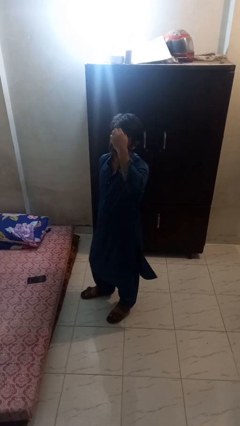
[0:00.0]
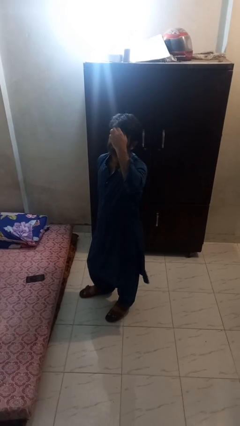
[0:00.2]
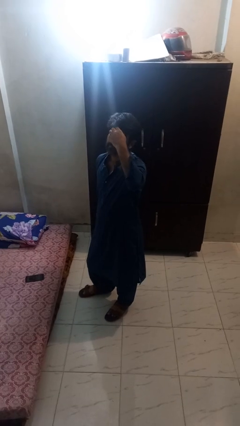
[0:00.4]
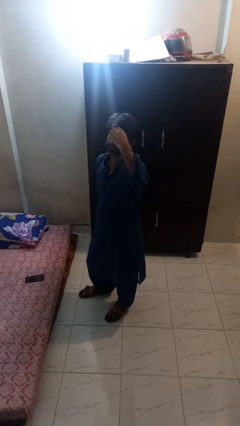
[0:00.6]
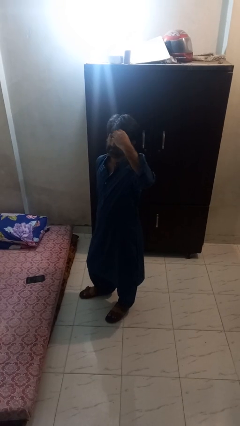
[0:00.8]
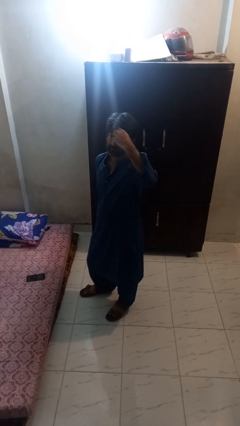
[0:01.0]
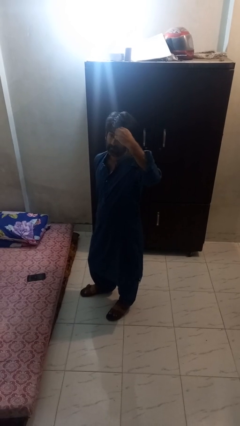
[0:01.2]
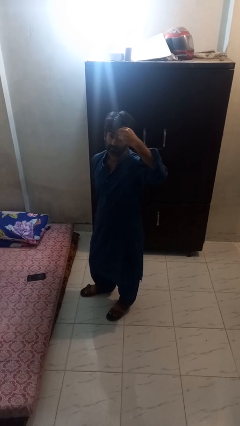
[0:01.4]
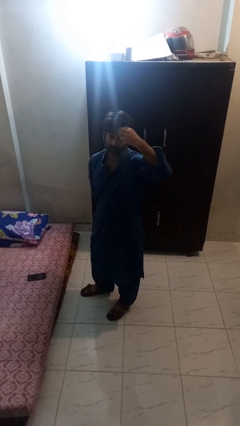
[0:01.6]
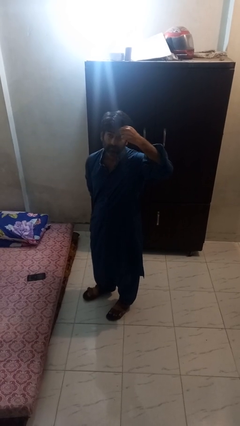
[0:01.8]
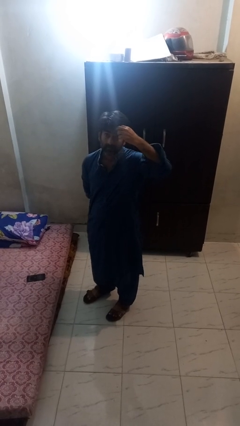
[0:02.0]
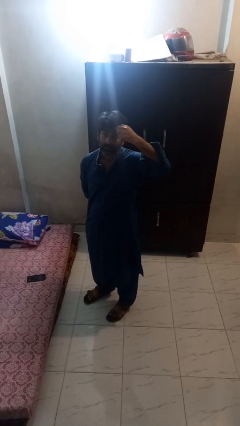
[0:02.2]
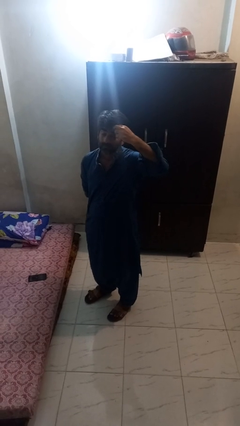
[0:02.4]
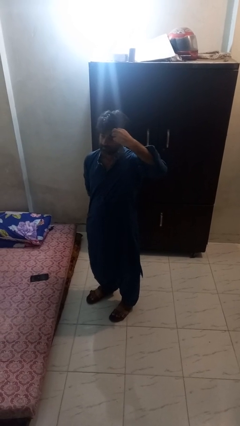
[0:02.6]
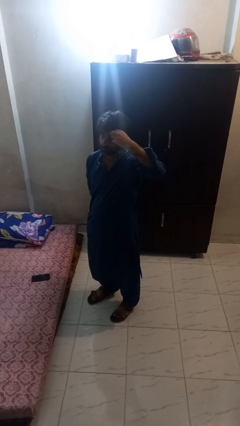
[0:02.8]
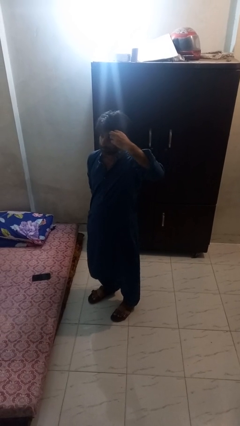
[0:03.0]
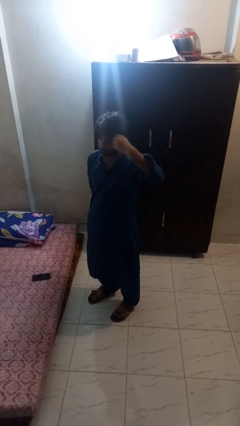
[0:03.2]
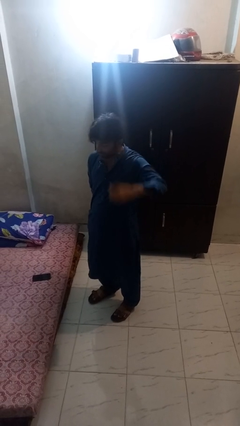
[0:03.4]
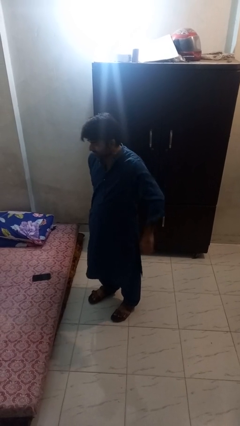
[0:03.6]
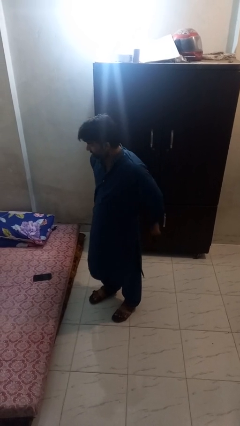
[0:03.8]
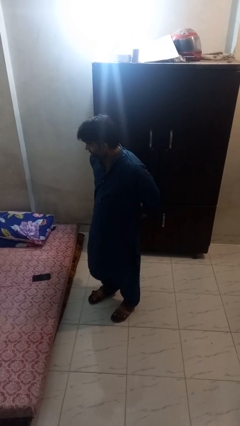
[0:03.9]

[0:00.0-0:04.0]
person scratches face

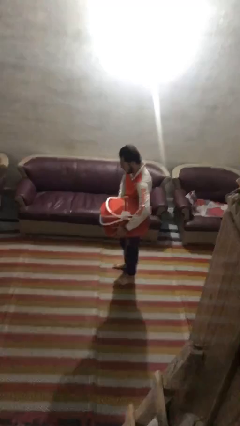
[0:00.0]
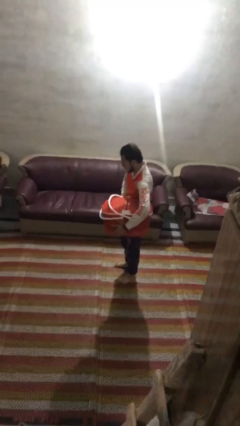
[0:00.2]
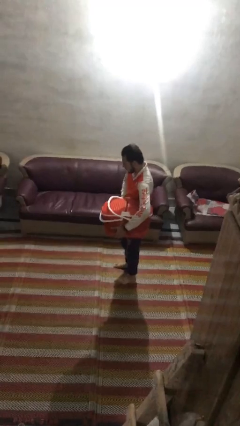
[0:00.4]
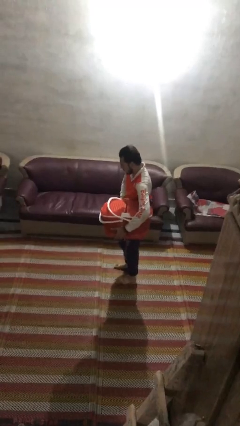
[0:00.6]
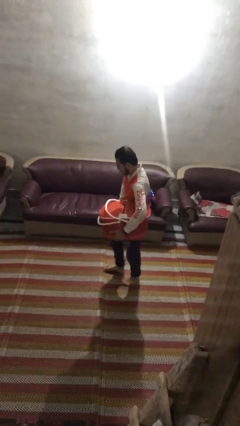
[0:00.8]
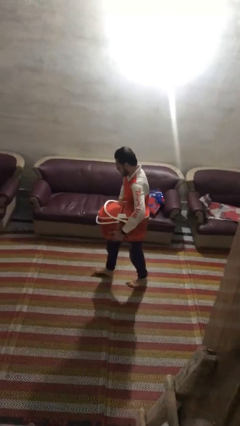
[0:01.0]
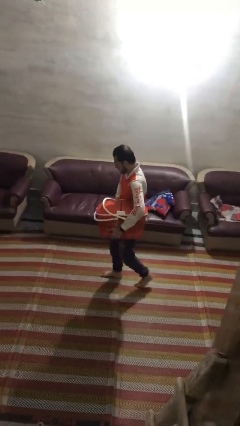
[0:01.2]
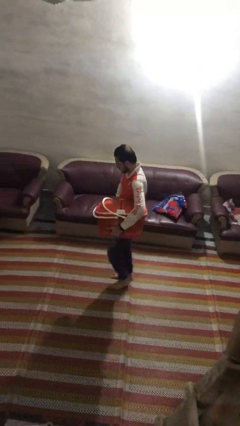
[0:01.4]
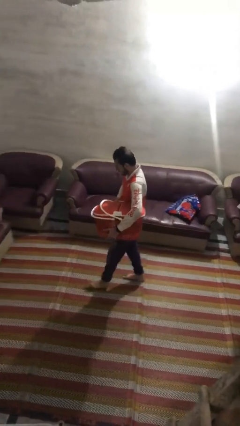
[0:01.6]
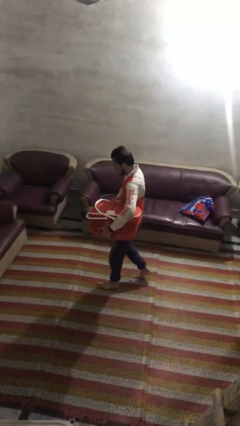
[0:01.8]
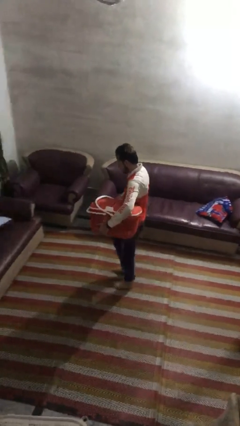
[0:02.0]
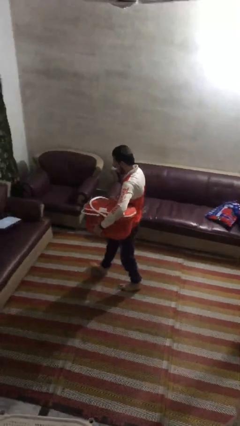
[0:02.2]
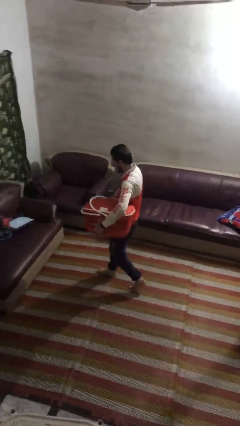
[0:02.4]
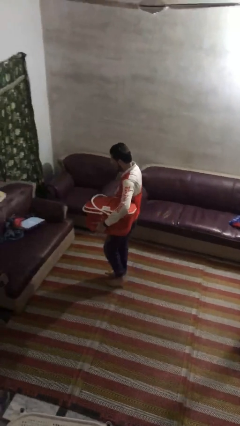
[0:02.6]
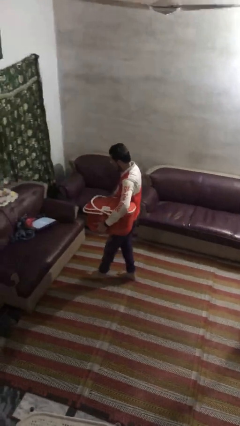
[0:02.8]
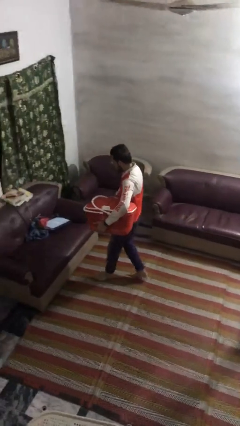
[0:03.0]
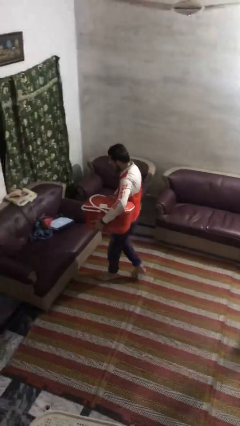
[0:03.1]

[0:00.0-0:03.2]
person carries laundry basket

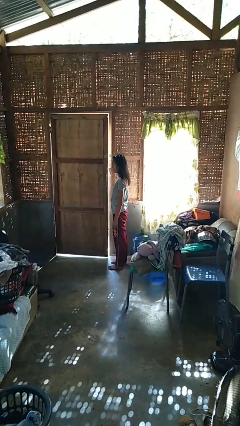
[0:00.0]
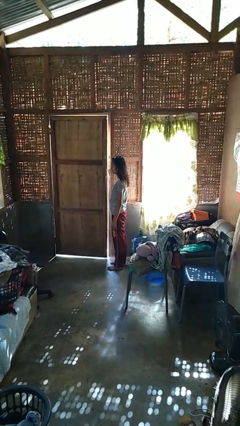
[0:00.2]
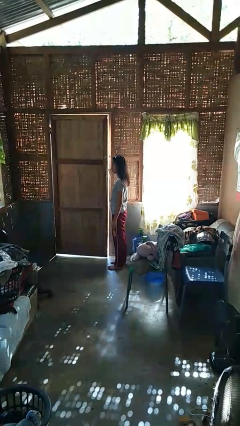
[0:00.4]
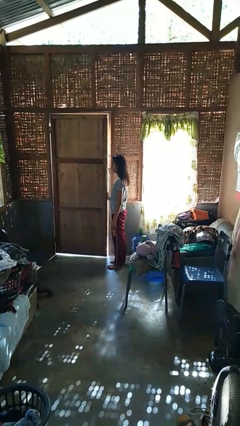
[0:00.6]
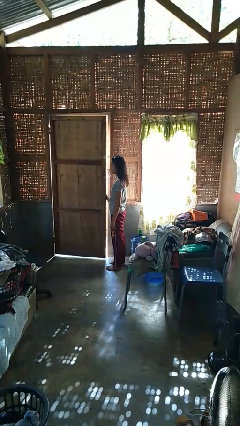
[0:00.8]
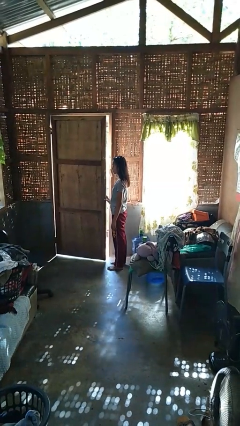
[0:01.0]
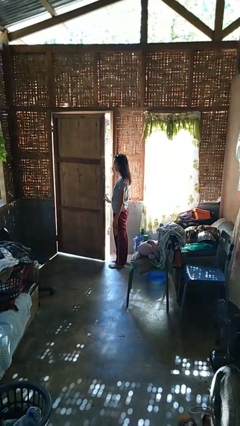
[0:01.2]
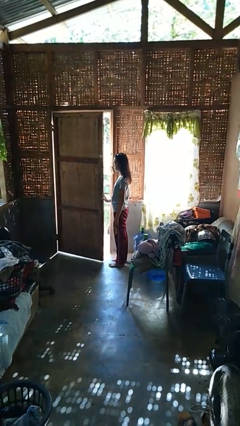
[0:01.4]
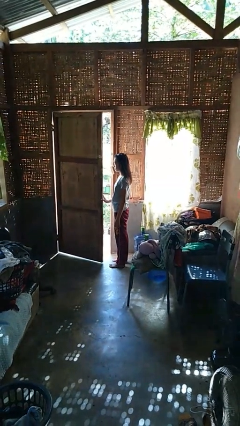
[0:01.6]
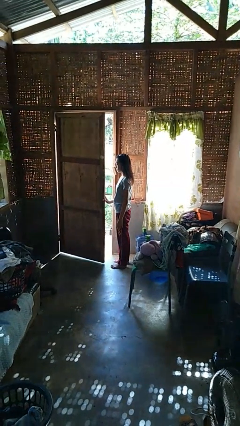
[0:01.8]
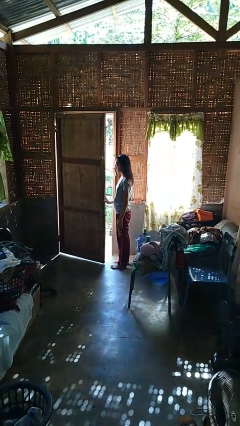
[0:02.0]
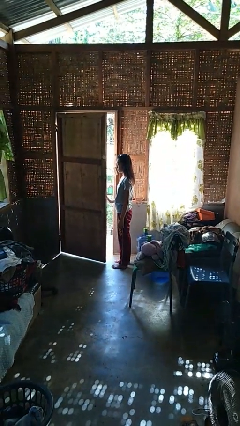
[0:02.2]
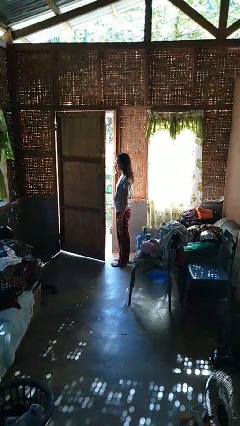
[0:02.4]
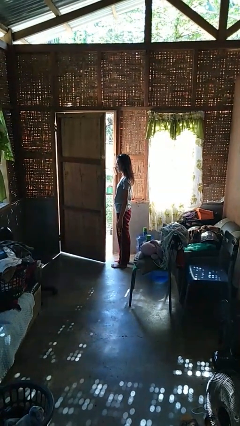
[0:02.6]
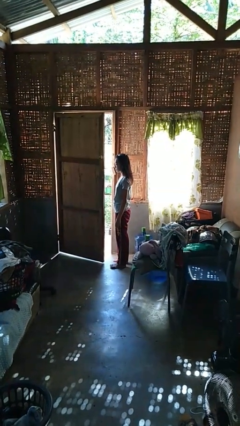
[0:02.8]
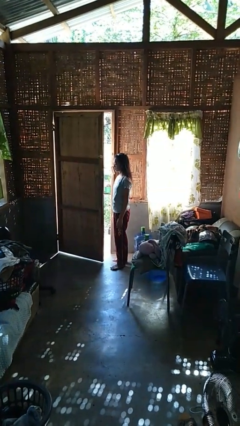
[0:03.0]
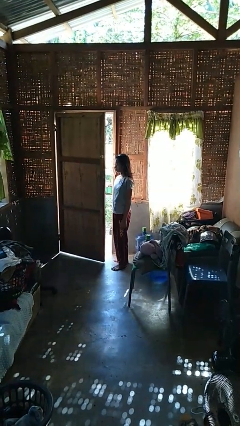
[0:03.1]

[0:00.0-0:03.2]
person opens facility door

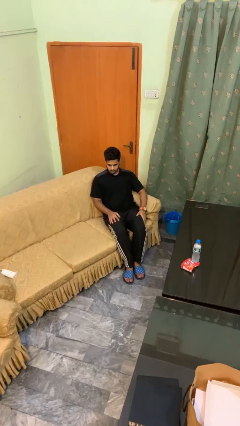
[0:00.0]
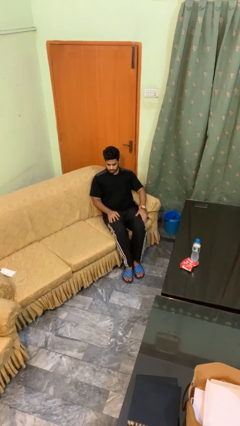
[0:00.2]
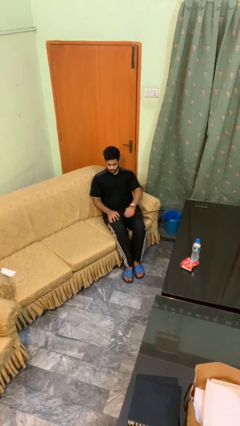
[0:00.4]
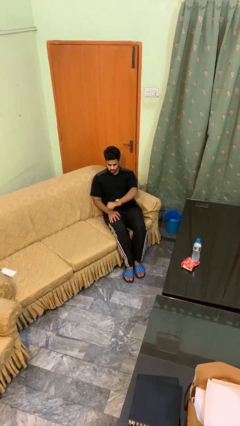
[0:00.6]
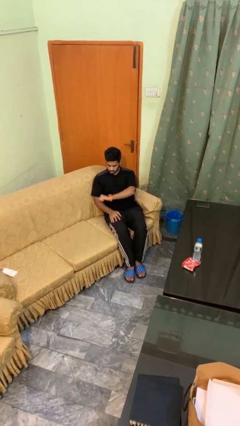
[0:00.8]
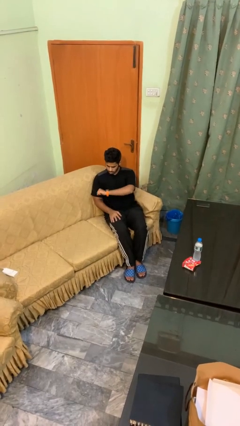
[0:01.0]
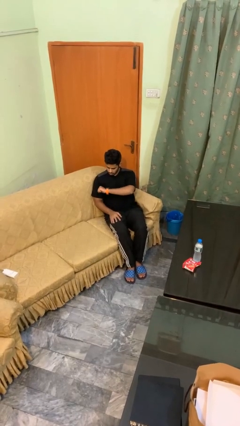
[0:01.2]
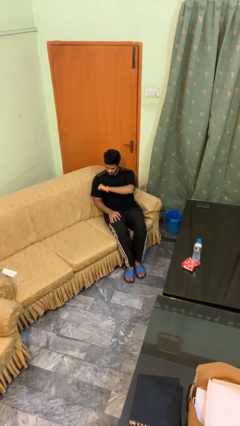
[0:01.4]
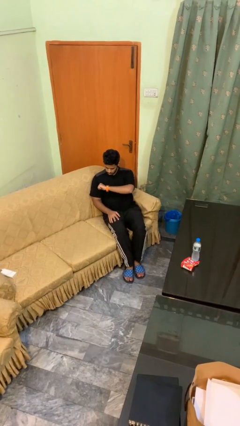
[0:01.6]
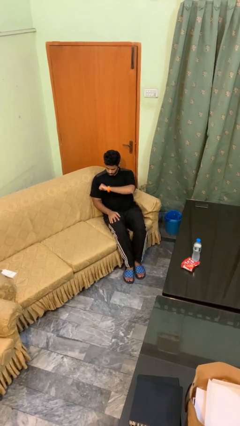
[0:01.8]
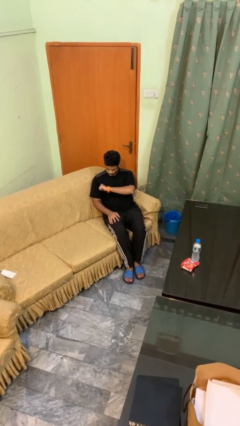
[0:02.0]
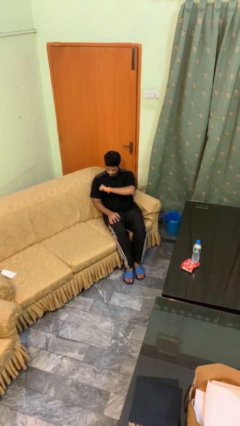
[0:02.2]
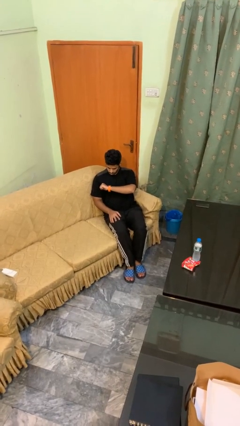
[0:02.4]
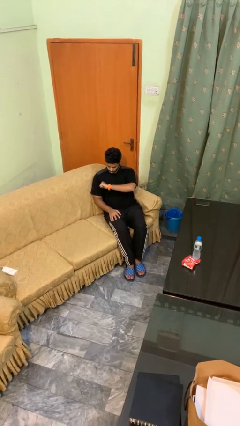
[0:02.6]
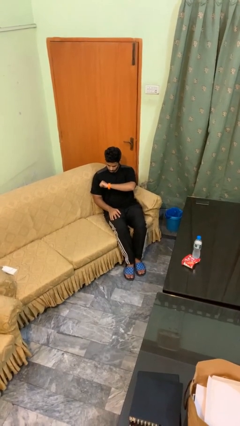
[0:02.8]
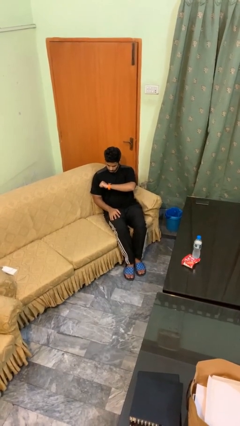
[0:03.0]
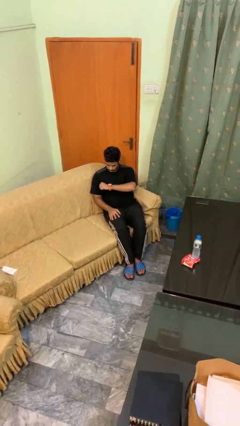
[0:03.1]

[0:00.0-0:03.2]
person looks at wristwatch

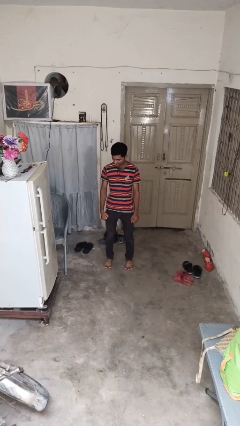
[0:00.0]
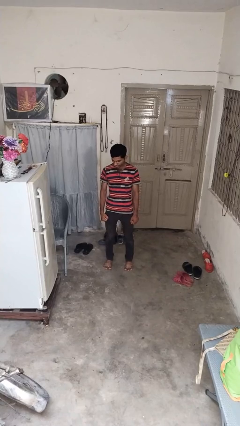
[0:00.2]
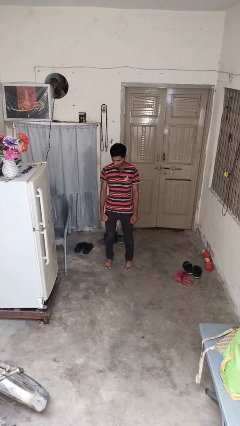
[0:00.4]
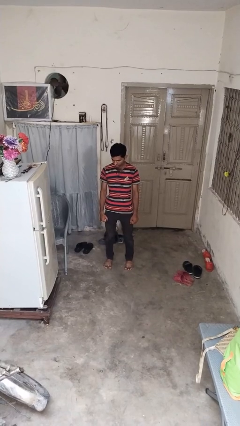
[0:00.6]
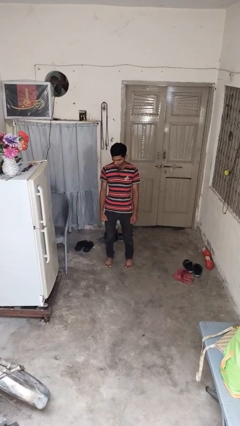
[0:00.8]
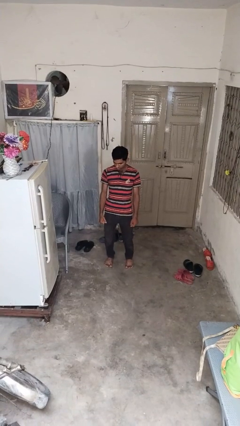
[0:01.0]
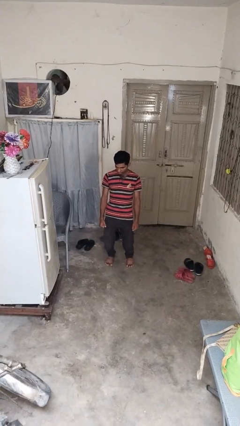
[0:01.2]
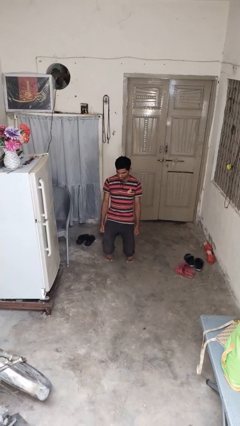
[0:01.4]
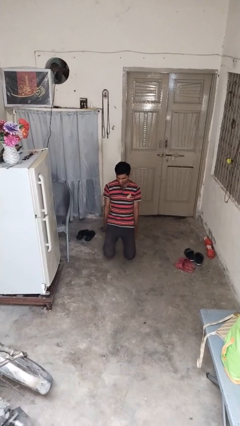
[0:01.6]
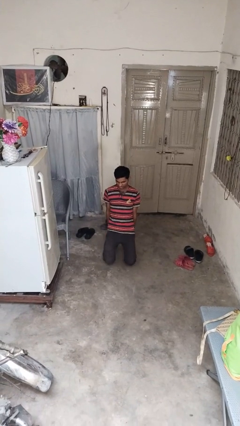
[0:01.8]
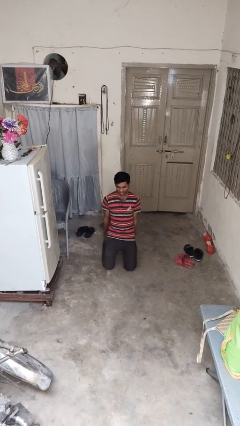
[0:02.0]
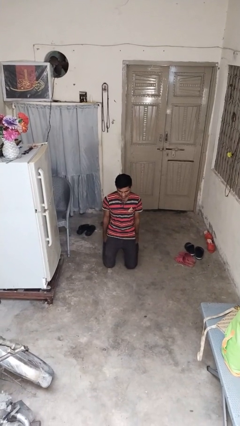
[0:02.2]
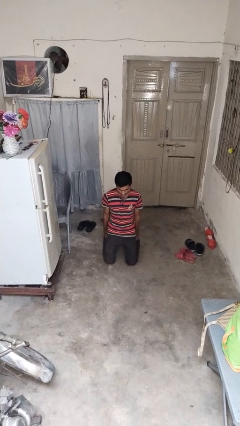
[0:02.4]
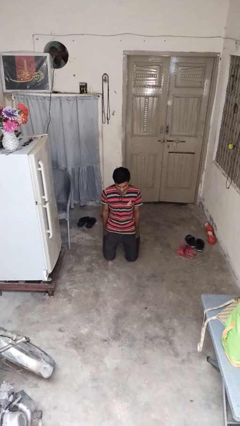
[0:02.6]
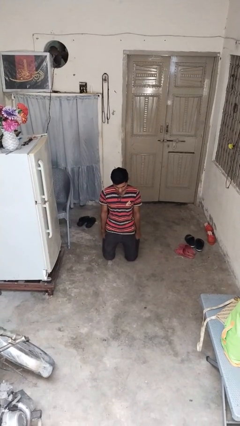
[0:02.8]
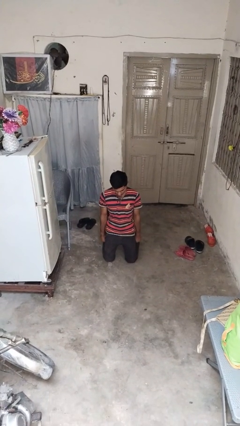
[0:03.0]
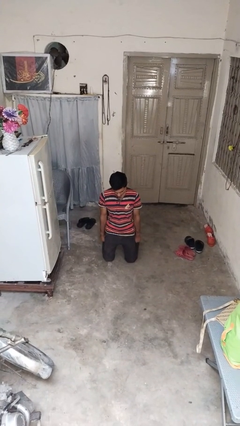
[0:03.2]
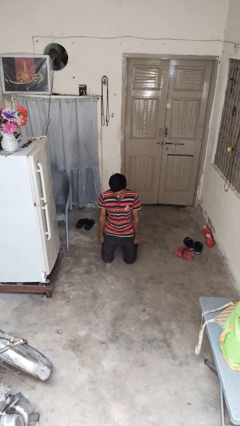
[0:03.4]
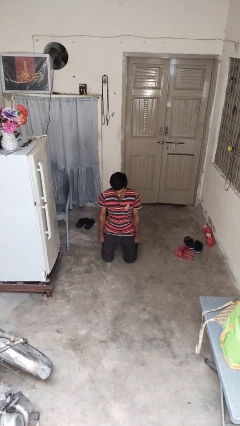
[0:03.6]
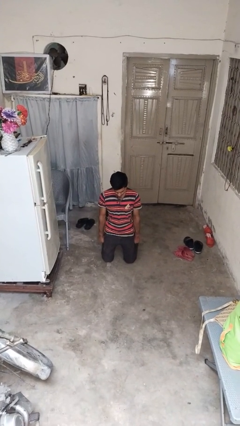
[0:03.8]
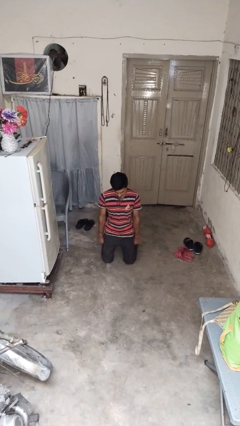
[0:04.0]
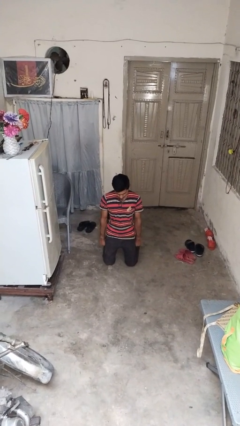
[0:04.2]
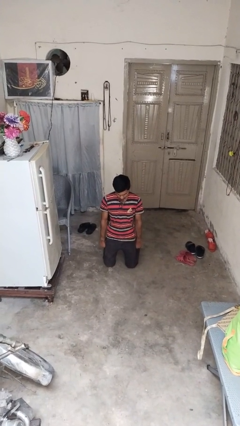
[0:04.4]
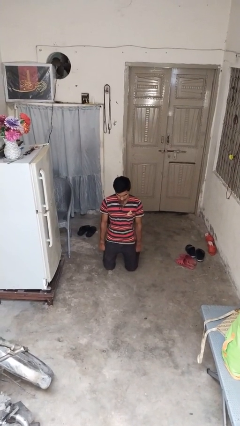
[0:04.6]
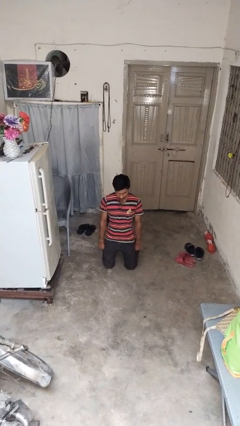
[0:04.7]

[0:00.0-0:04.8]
person kneels
